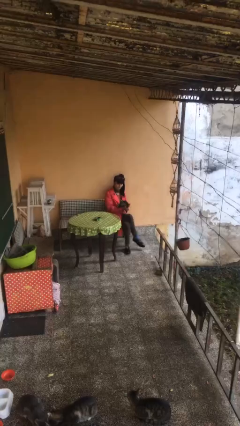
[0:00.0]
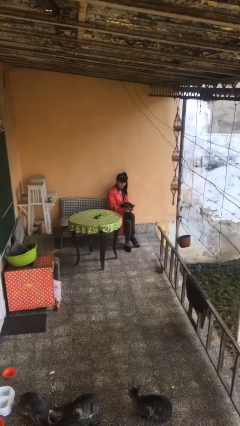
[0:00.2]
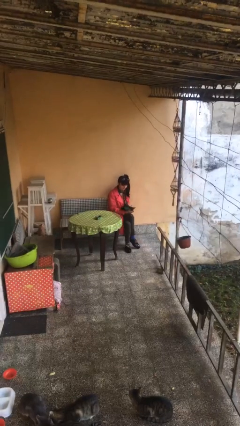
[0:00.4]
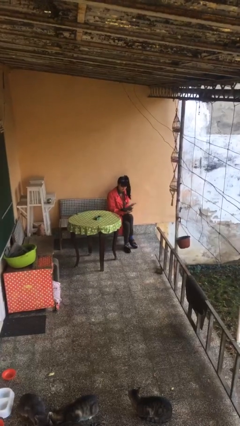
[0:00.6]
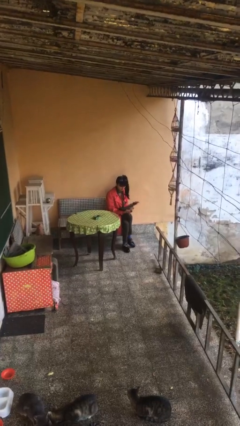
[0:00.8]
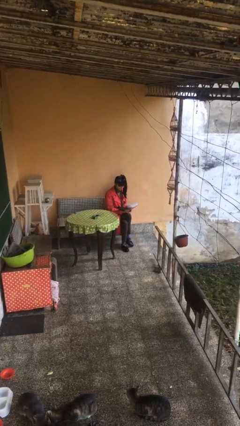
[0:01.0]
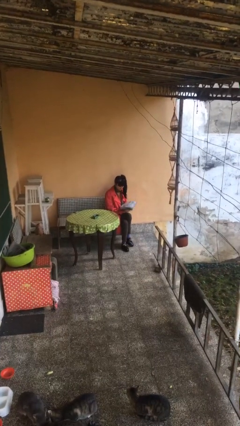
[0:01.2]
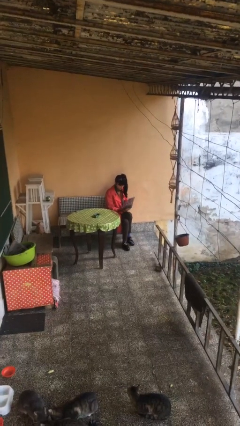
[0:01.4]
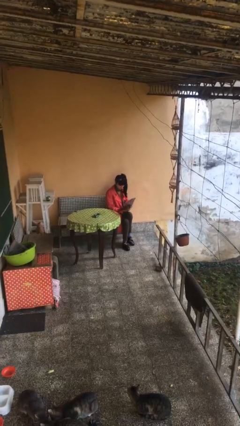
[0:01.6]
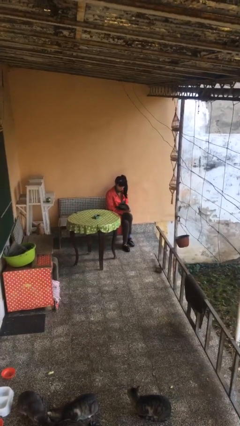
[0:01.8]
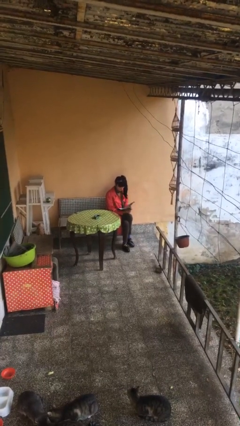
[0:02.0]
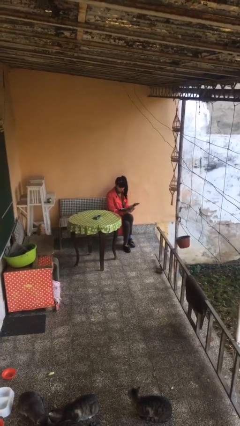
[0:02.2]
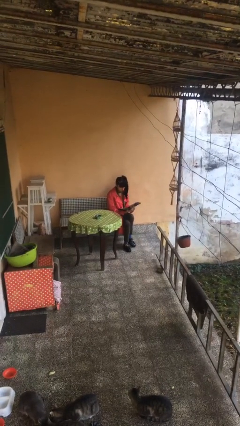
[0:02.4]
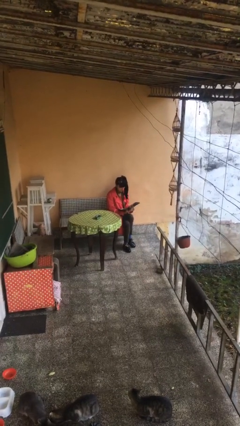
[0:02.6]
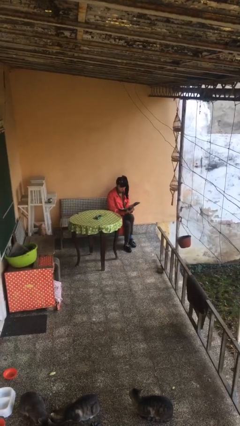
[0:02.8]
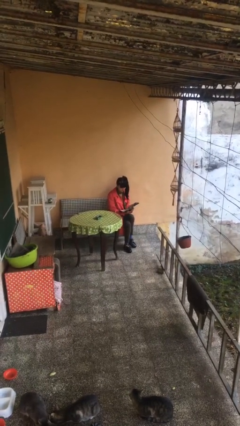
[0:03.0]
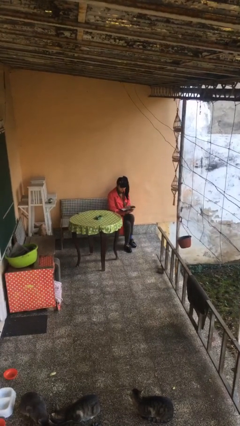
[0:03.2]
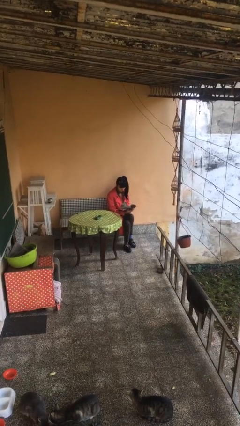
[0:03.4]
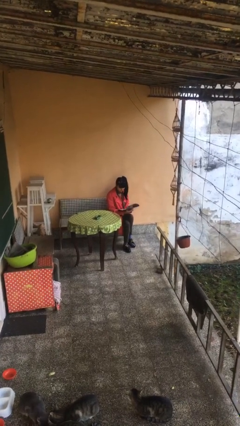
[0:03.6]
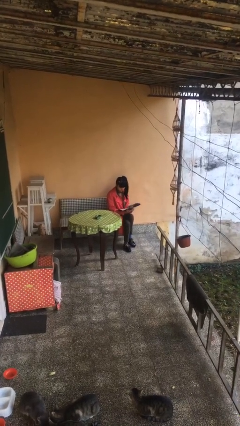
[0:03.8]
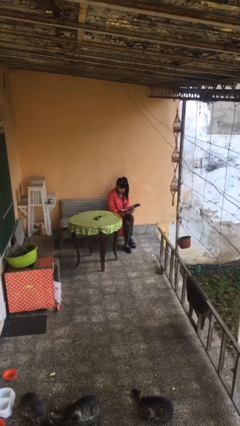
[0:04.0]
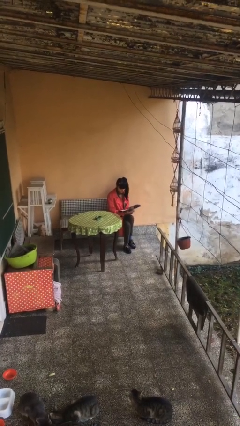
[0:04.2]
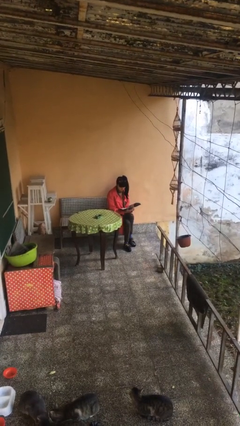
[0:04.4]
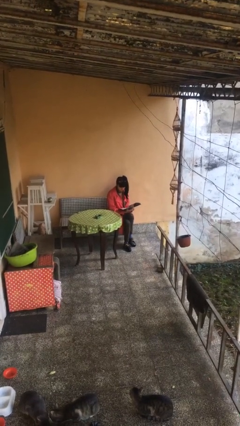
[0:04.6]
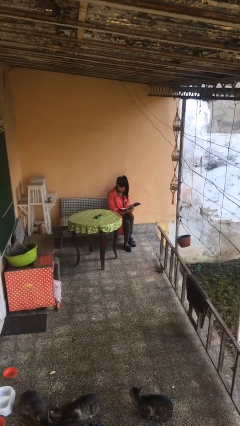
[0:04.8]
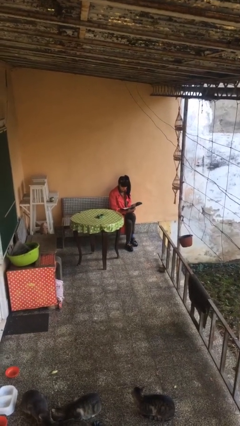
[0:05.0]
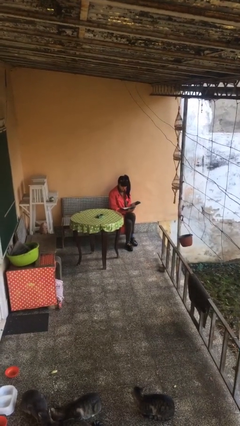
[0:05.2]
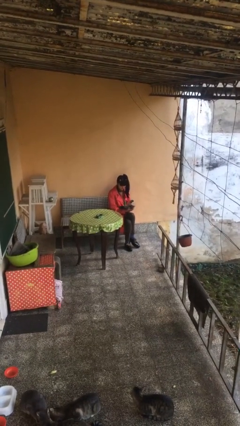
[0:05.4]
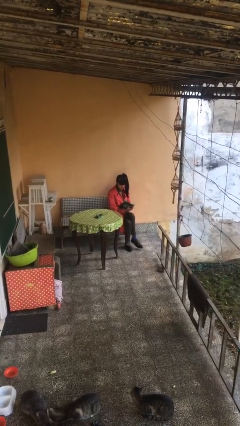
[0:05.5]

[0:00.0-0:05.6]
person reads document

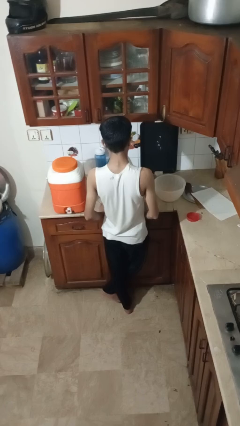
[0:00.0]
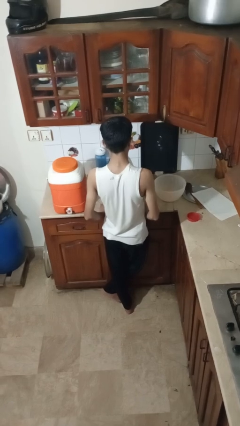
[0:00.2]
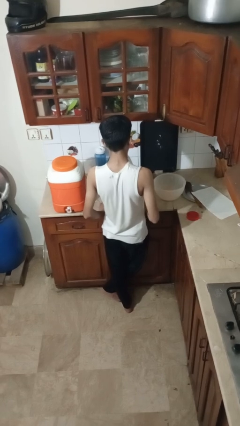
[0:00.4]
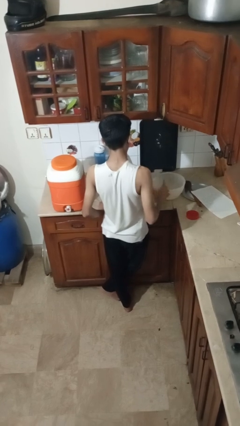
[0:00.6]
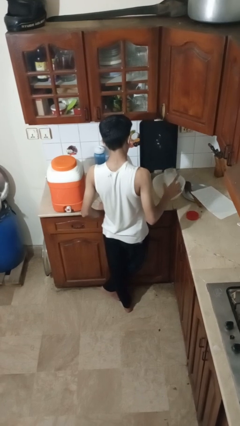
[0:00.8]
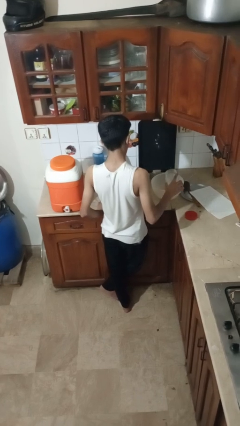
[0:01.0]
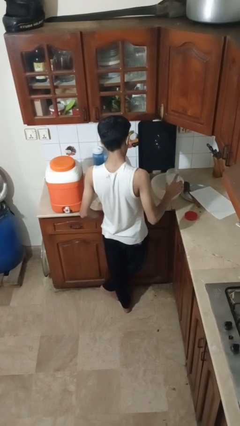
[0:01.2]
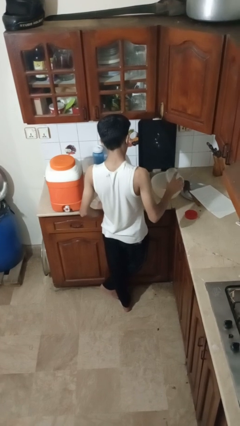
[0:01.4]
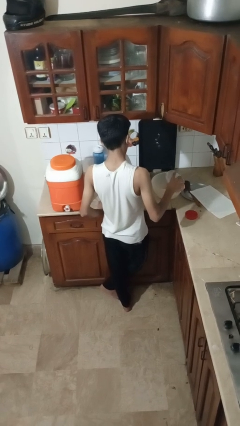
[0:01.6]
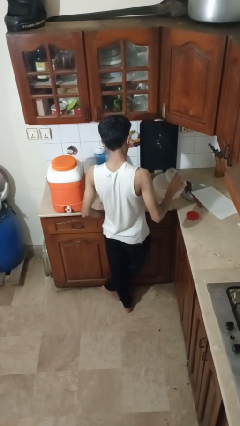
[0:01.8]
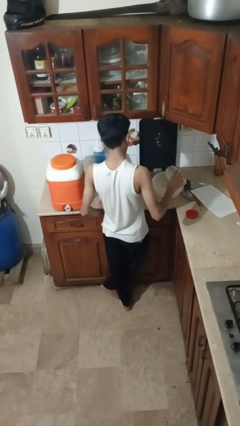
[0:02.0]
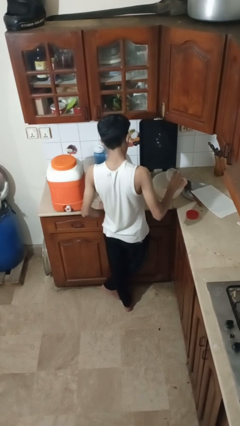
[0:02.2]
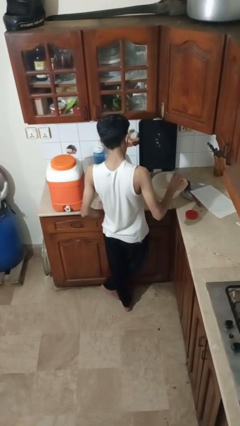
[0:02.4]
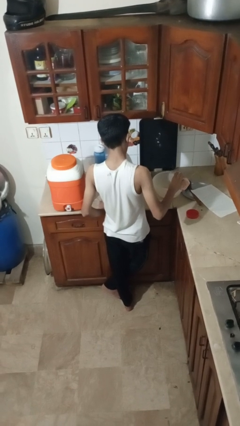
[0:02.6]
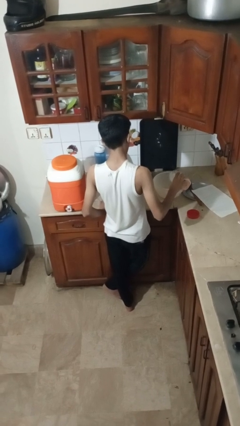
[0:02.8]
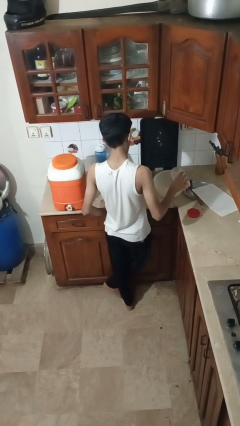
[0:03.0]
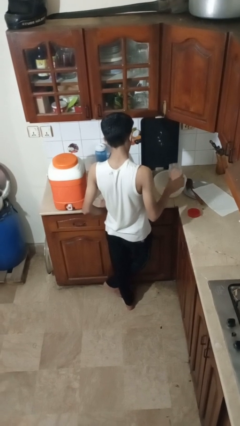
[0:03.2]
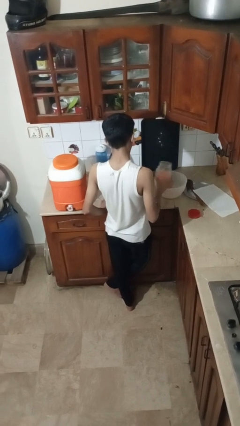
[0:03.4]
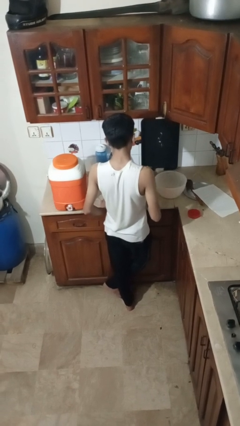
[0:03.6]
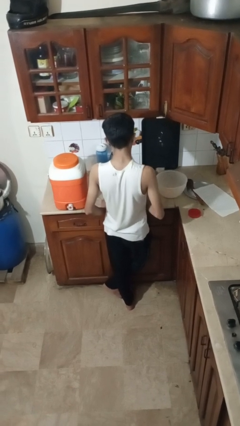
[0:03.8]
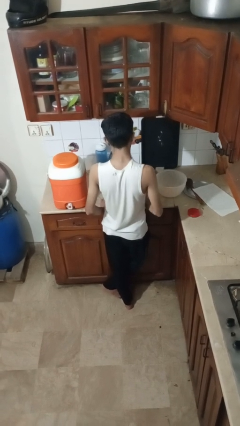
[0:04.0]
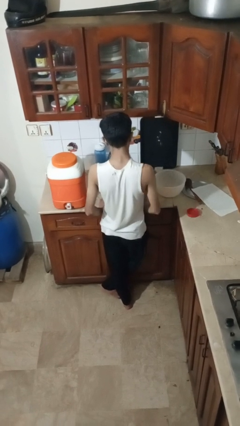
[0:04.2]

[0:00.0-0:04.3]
person pours into bowl

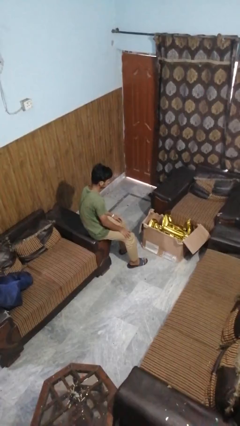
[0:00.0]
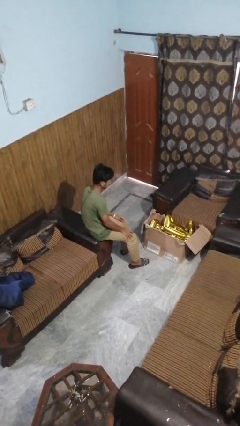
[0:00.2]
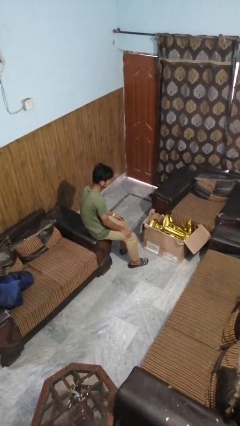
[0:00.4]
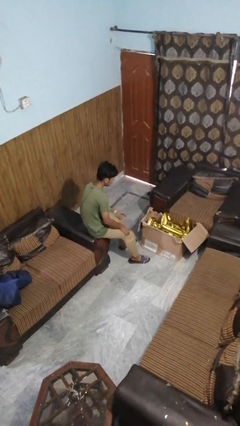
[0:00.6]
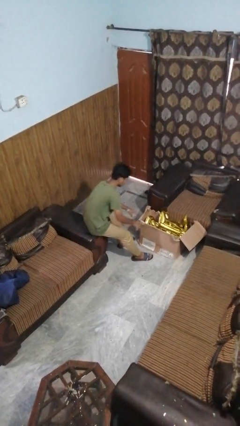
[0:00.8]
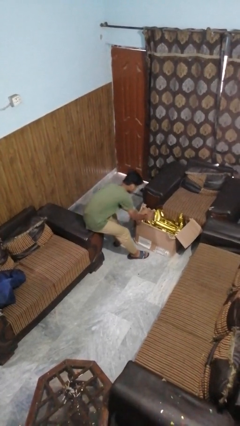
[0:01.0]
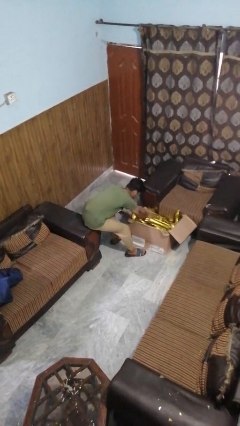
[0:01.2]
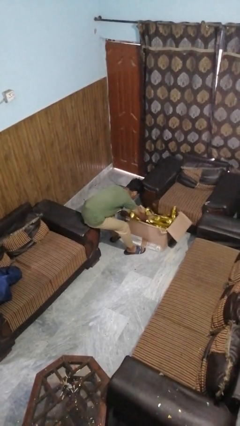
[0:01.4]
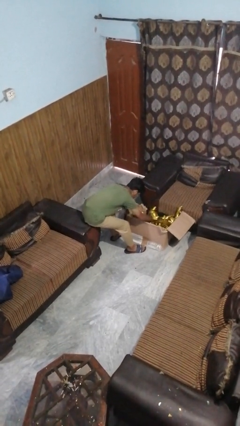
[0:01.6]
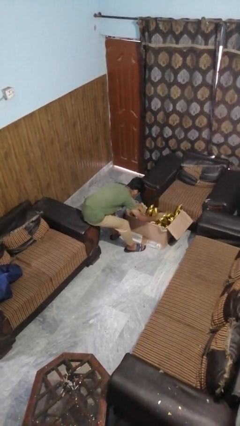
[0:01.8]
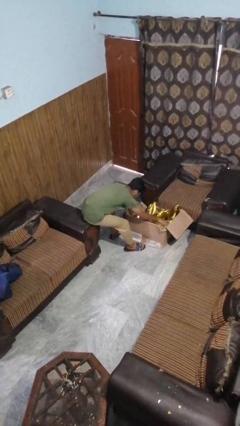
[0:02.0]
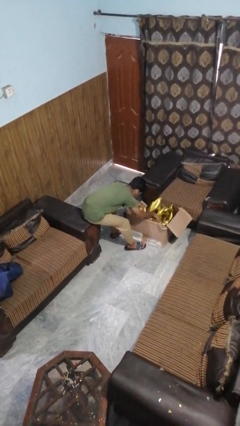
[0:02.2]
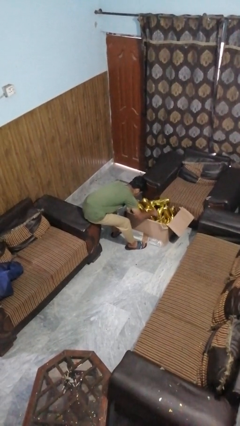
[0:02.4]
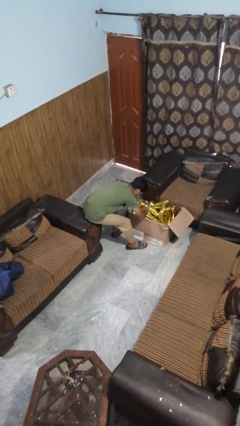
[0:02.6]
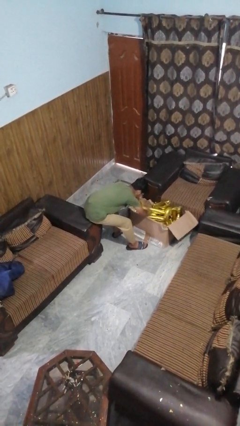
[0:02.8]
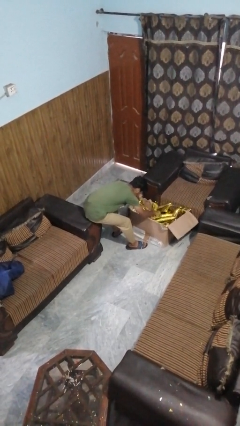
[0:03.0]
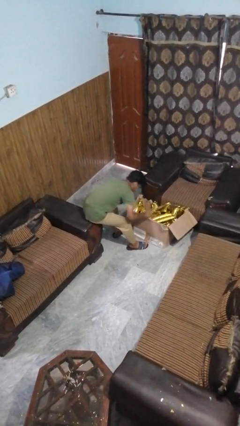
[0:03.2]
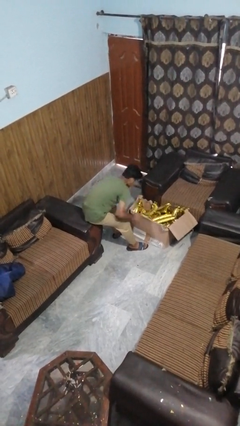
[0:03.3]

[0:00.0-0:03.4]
person searches in box

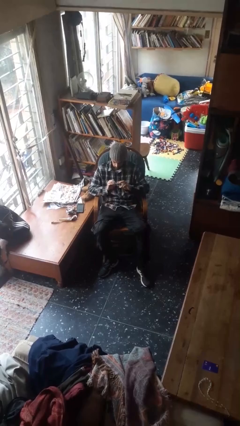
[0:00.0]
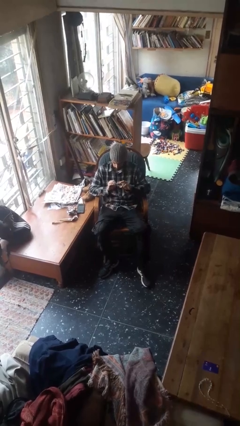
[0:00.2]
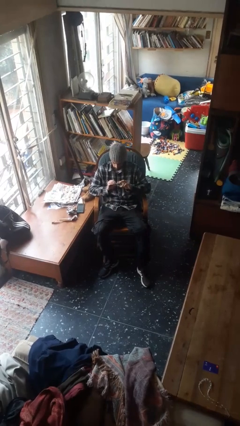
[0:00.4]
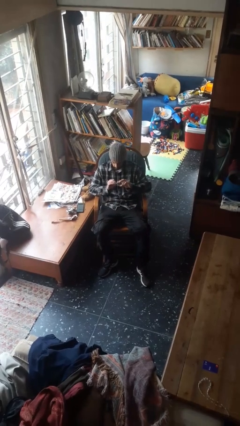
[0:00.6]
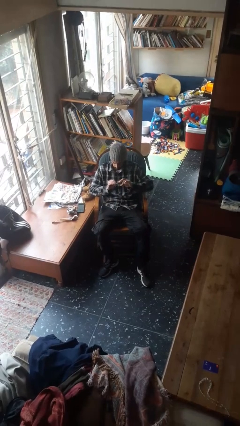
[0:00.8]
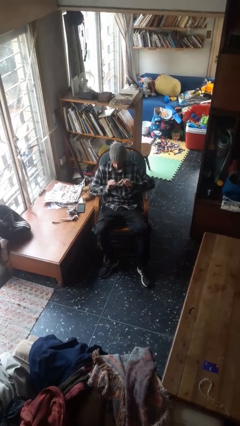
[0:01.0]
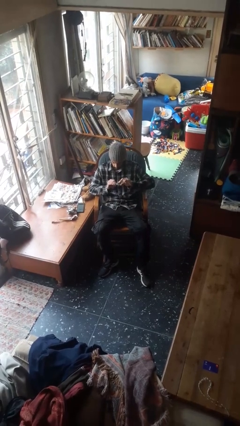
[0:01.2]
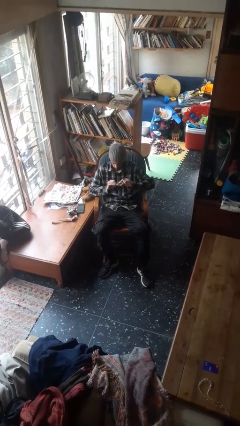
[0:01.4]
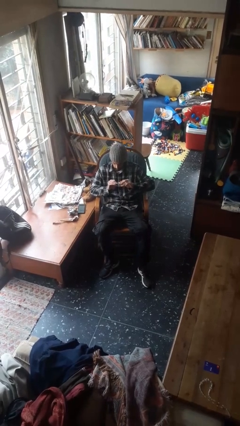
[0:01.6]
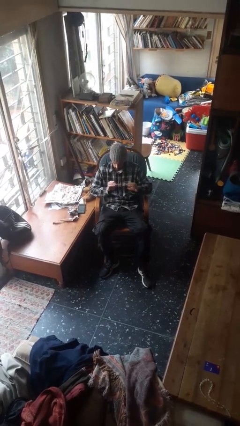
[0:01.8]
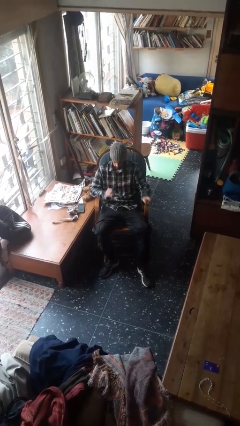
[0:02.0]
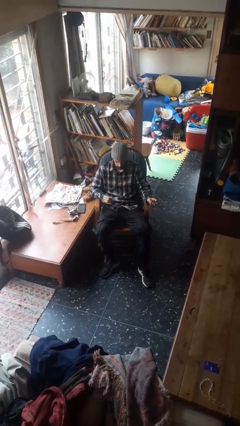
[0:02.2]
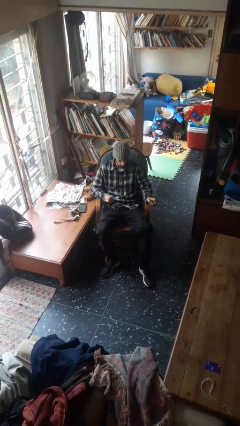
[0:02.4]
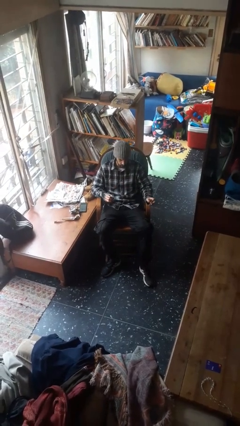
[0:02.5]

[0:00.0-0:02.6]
person clips fingernails

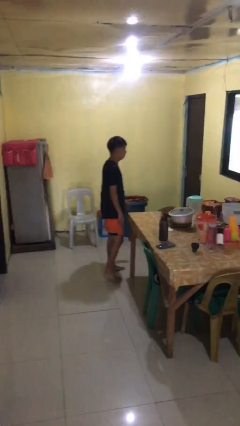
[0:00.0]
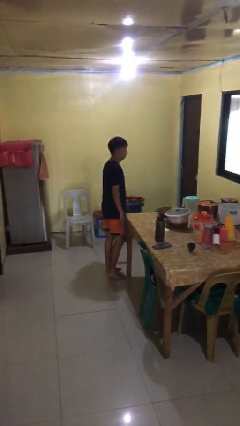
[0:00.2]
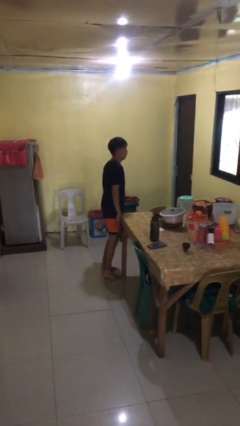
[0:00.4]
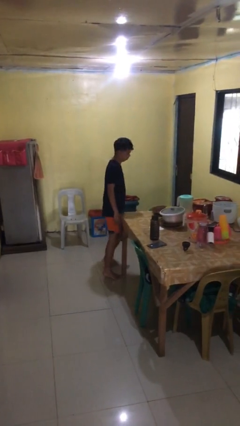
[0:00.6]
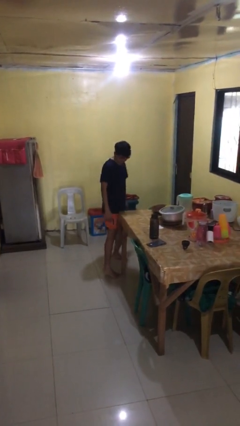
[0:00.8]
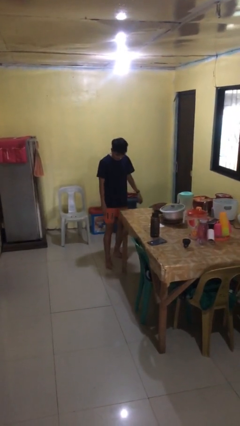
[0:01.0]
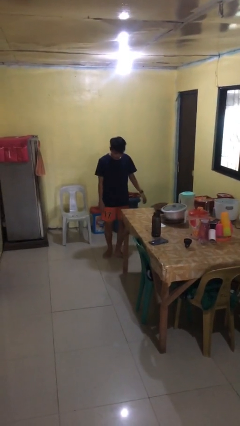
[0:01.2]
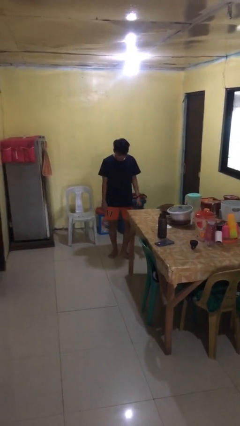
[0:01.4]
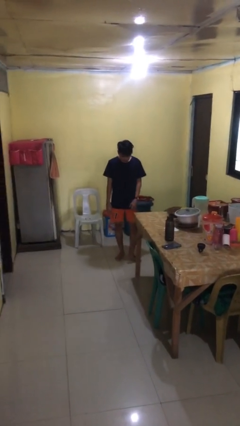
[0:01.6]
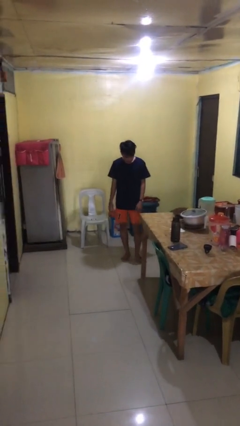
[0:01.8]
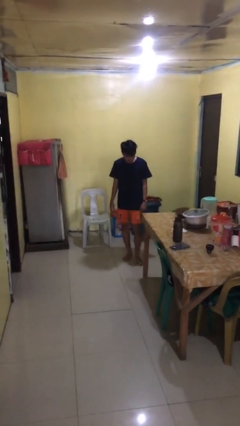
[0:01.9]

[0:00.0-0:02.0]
person bumps into table
